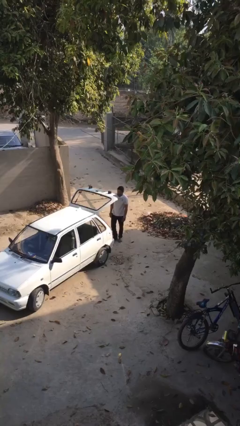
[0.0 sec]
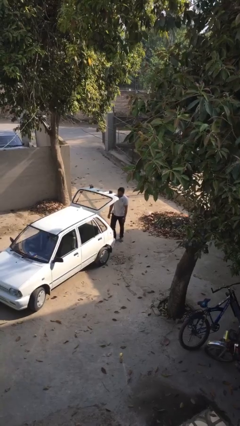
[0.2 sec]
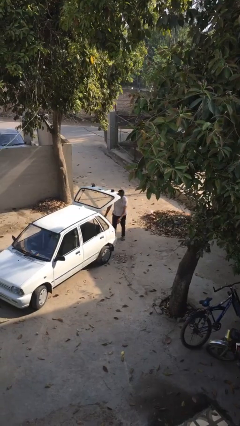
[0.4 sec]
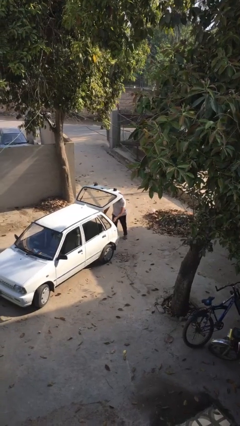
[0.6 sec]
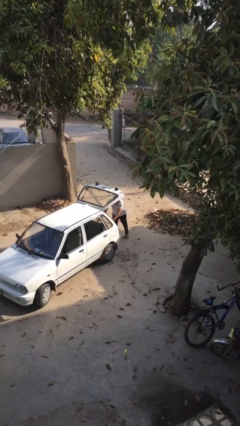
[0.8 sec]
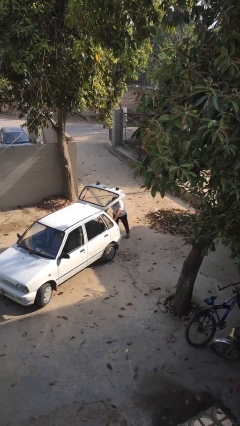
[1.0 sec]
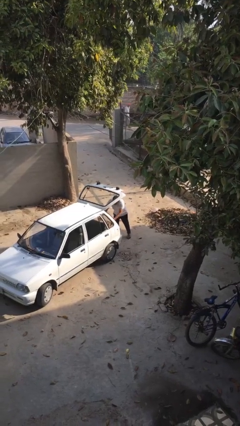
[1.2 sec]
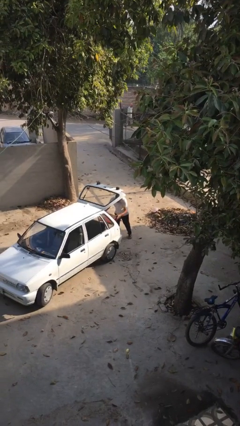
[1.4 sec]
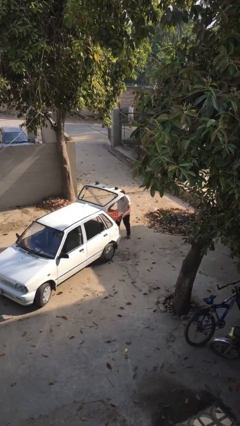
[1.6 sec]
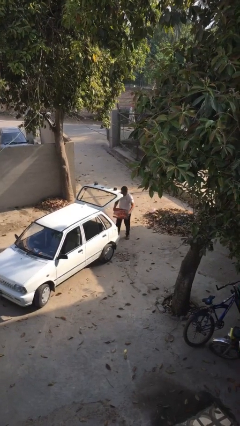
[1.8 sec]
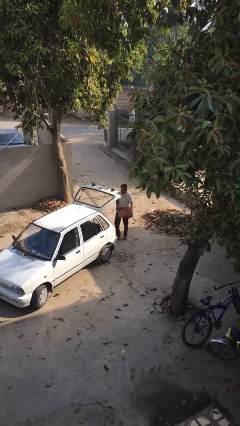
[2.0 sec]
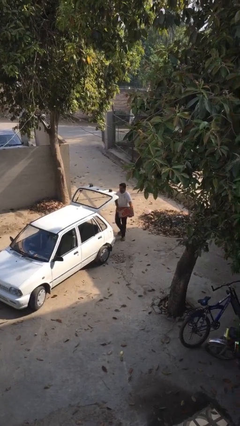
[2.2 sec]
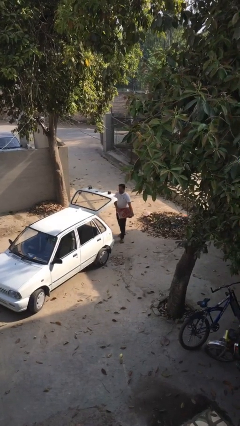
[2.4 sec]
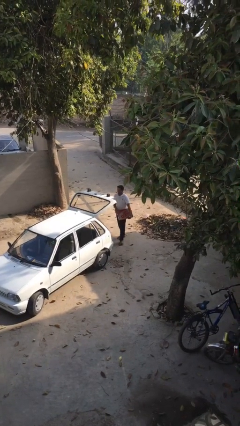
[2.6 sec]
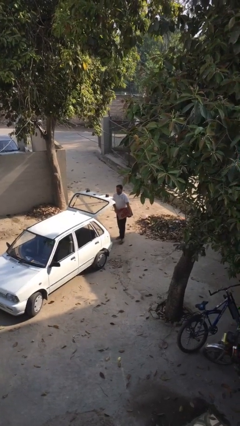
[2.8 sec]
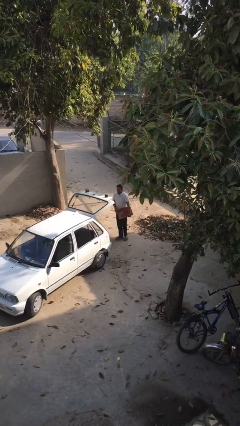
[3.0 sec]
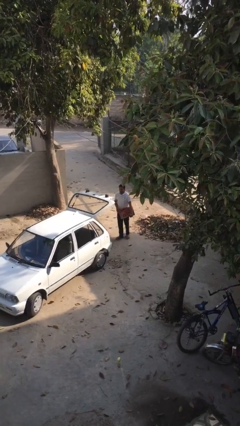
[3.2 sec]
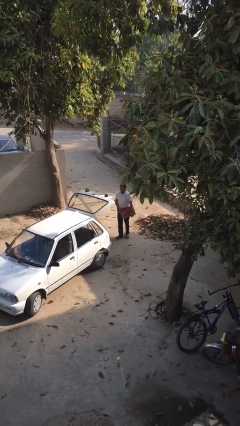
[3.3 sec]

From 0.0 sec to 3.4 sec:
person unloads car

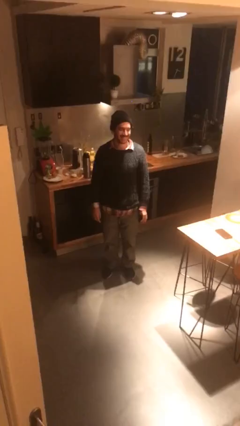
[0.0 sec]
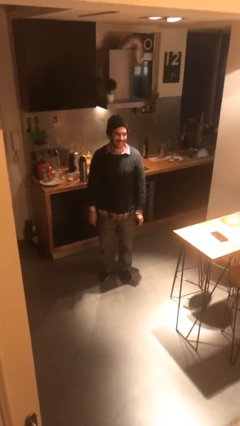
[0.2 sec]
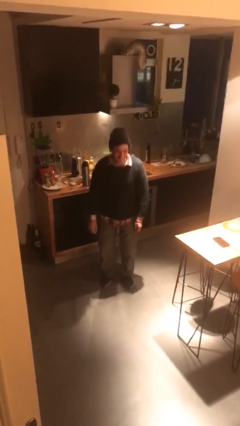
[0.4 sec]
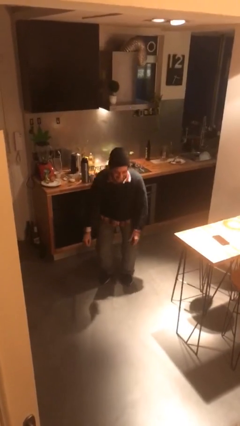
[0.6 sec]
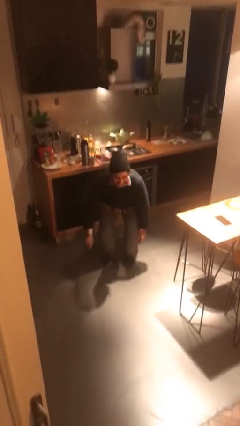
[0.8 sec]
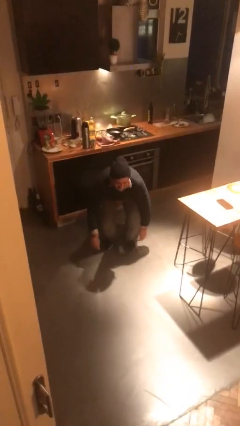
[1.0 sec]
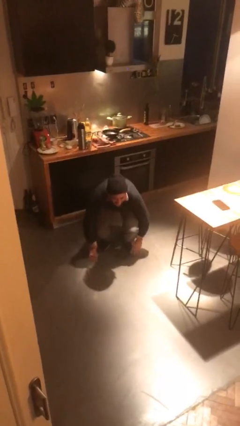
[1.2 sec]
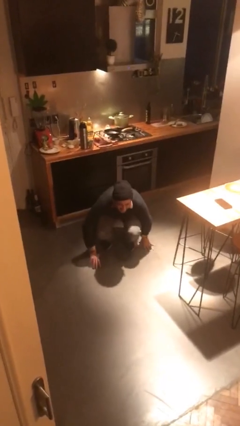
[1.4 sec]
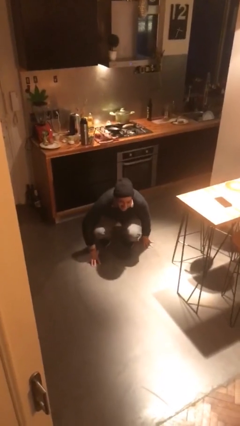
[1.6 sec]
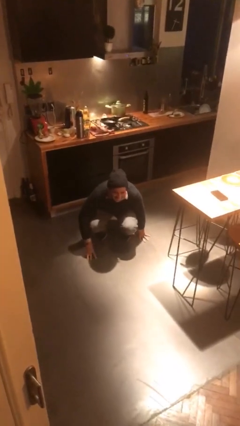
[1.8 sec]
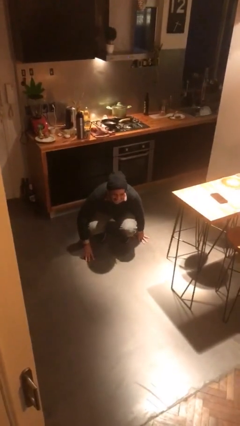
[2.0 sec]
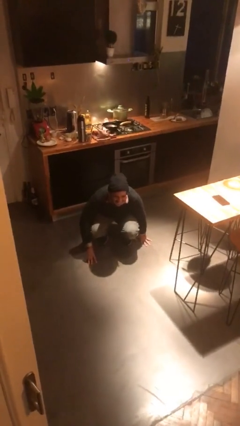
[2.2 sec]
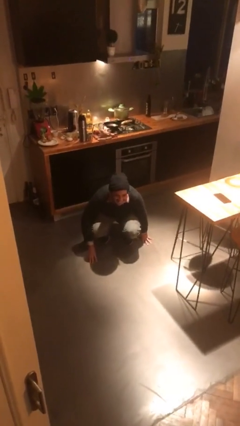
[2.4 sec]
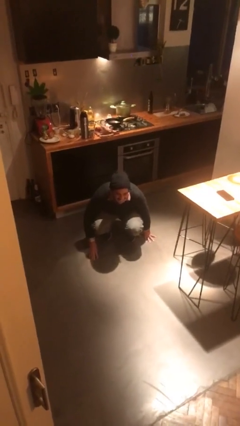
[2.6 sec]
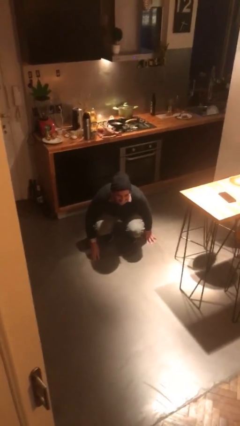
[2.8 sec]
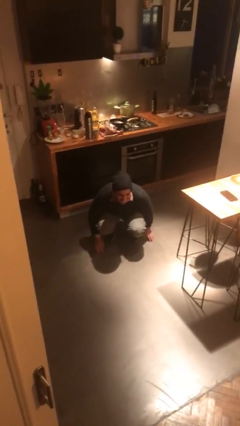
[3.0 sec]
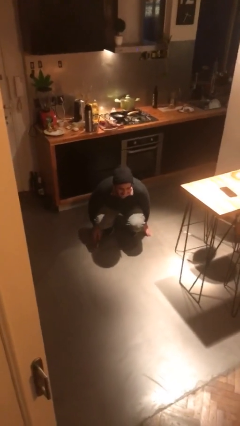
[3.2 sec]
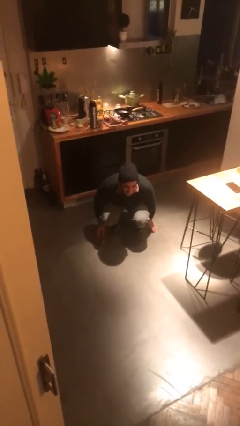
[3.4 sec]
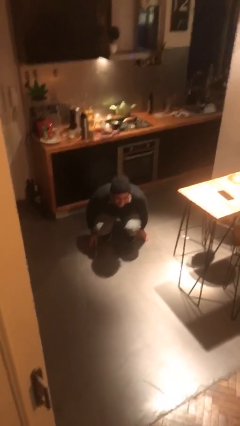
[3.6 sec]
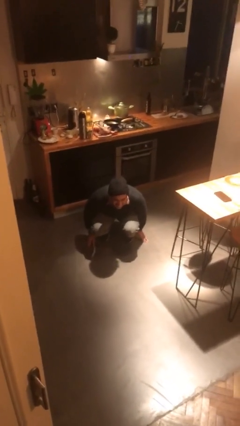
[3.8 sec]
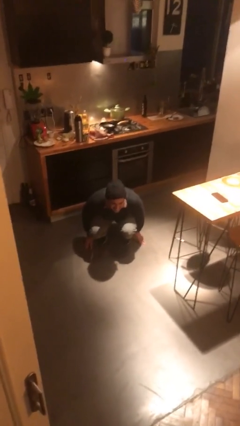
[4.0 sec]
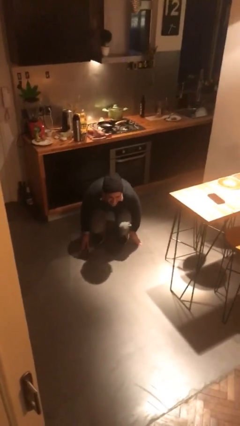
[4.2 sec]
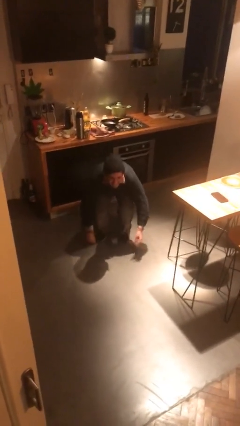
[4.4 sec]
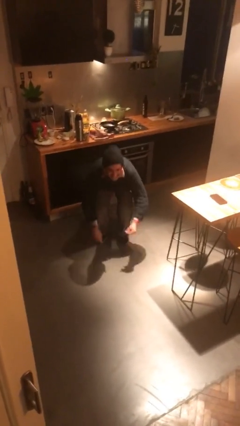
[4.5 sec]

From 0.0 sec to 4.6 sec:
person squats

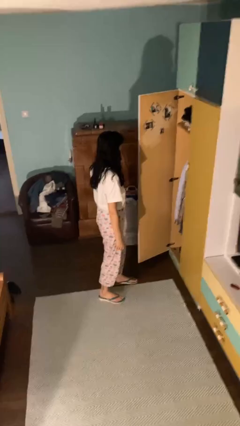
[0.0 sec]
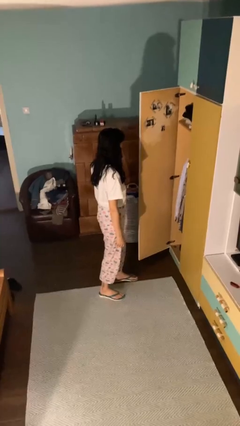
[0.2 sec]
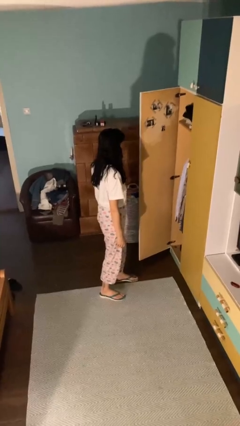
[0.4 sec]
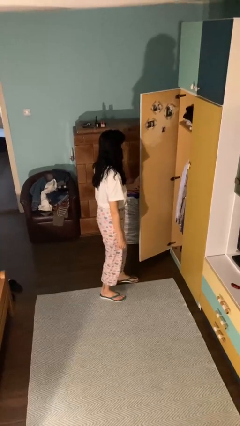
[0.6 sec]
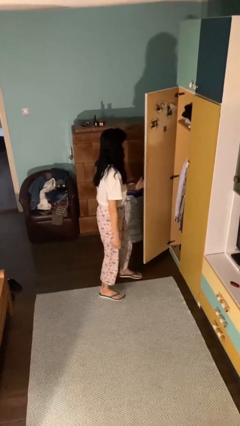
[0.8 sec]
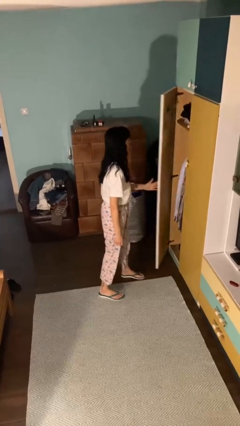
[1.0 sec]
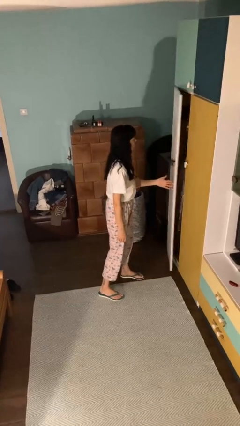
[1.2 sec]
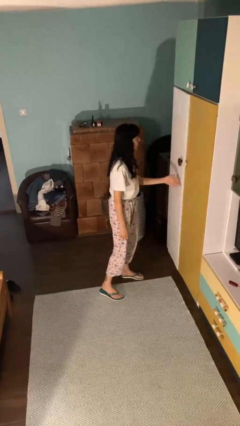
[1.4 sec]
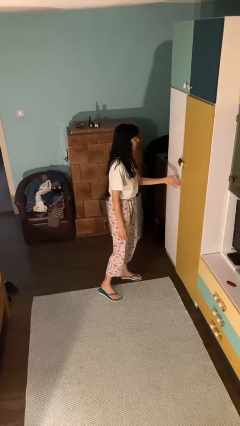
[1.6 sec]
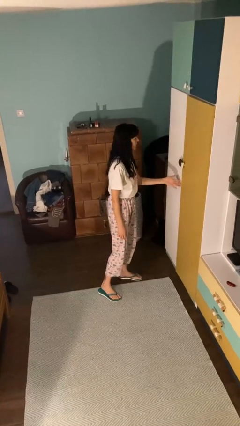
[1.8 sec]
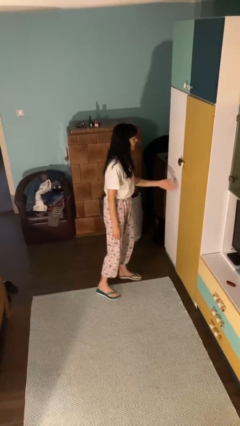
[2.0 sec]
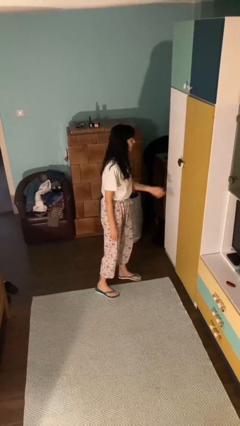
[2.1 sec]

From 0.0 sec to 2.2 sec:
person closes closet door

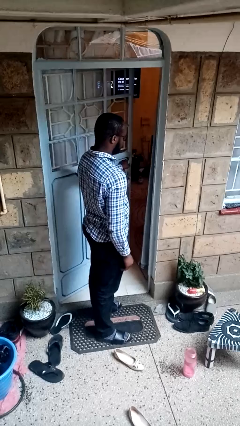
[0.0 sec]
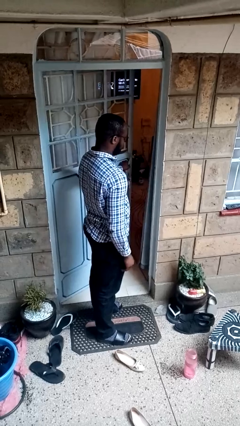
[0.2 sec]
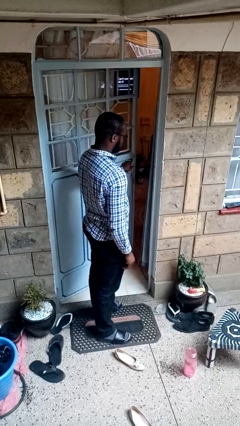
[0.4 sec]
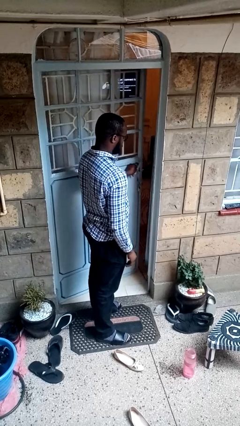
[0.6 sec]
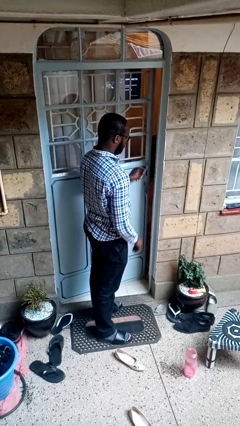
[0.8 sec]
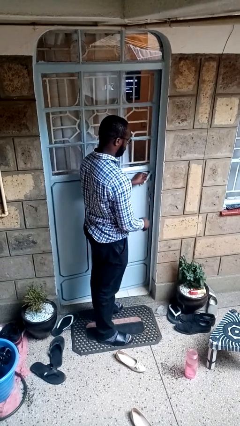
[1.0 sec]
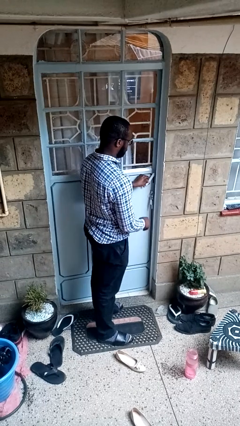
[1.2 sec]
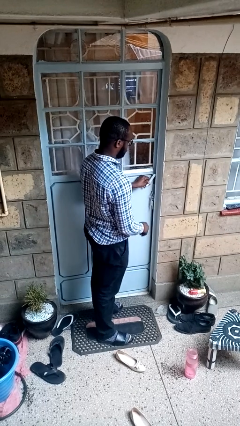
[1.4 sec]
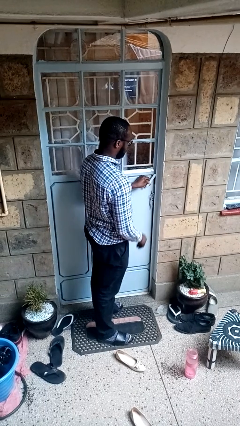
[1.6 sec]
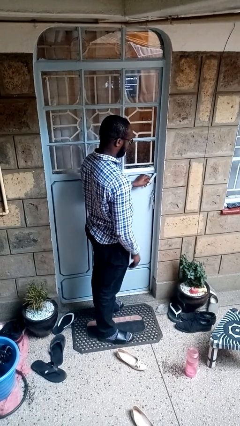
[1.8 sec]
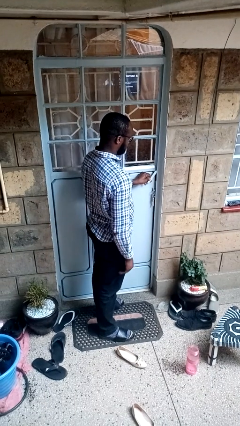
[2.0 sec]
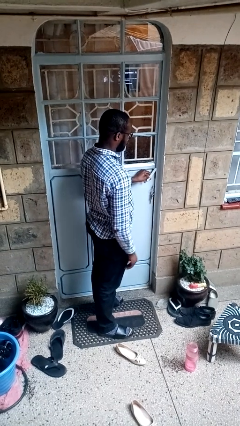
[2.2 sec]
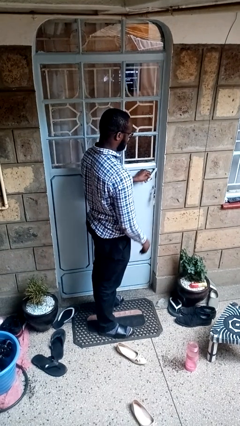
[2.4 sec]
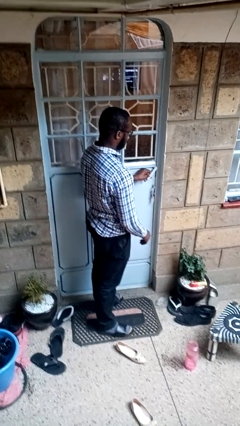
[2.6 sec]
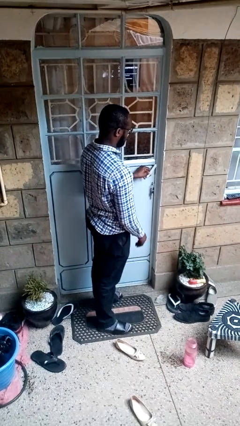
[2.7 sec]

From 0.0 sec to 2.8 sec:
person closes facility door

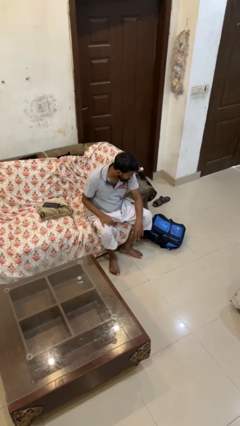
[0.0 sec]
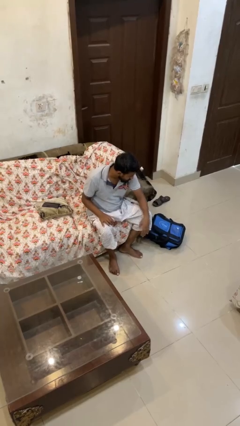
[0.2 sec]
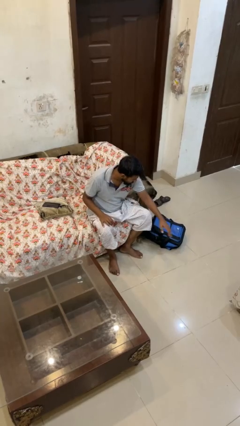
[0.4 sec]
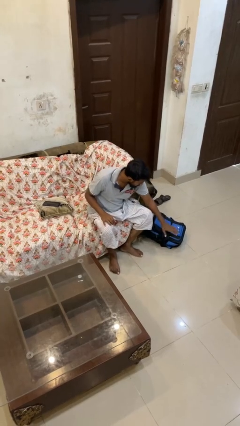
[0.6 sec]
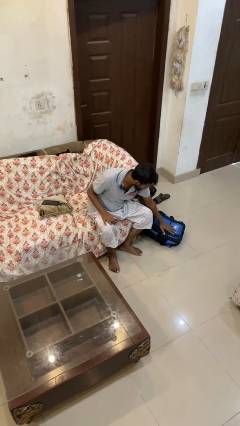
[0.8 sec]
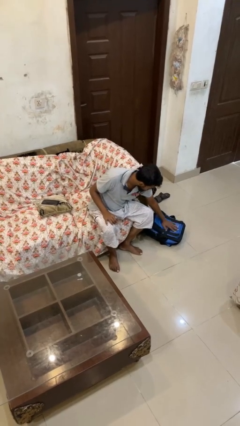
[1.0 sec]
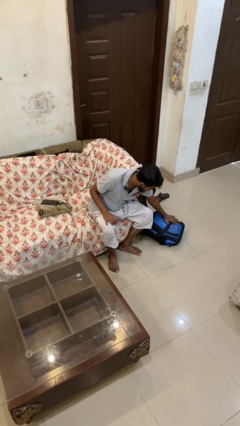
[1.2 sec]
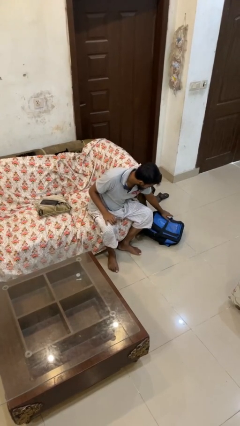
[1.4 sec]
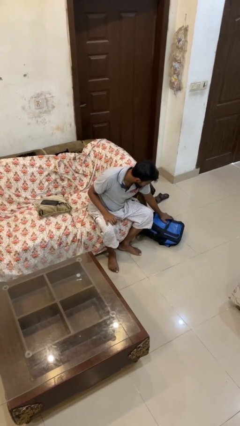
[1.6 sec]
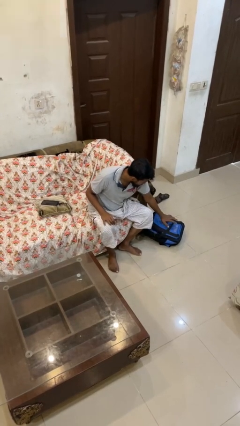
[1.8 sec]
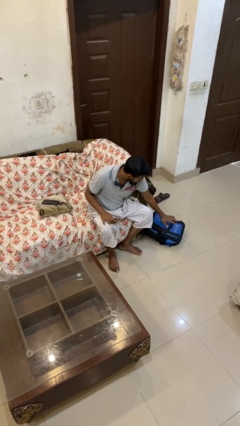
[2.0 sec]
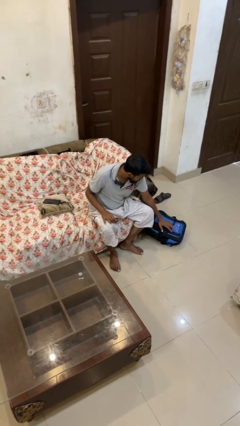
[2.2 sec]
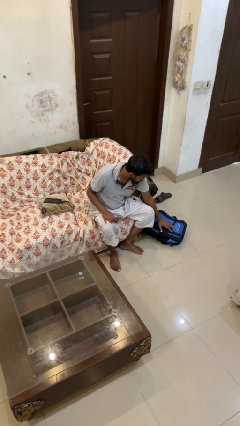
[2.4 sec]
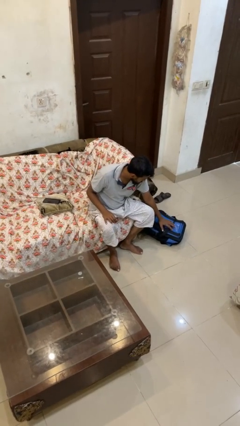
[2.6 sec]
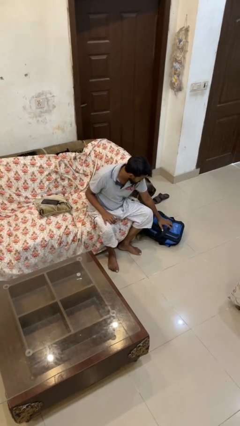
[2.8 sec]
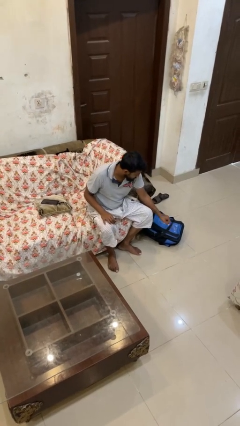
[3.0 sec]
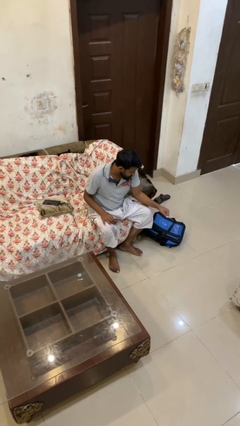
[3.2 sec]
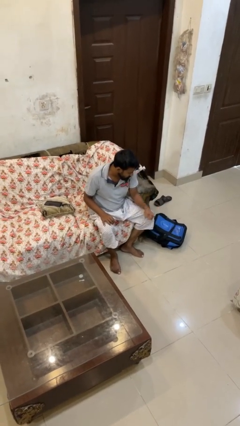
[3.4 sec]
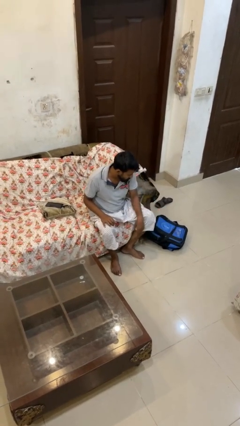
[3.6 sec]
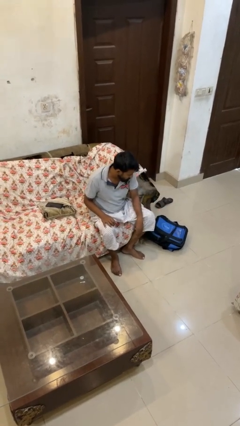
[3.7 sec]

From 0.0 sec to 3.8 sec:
person waves hand over object

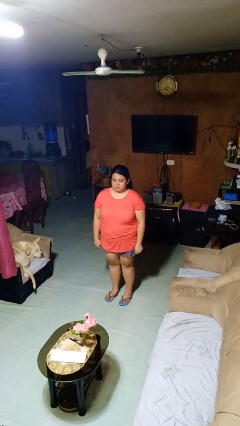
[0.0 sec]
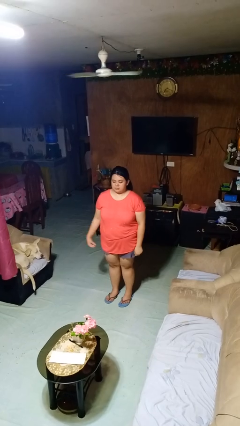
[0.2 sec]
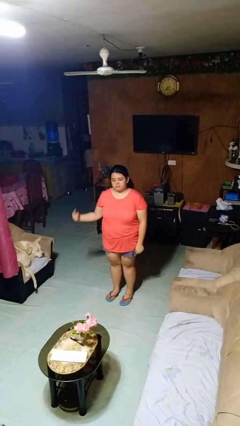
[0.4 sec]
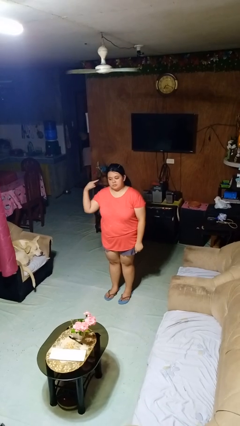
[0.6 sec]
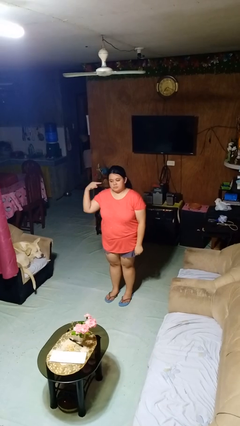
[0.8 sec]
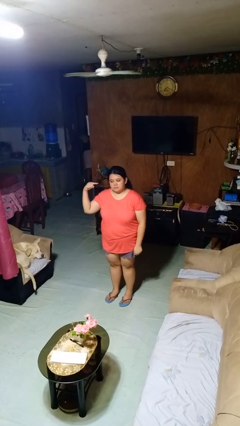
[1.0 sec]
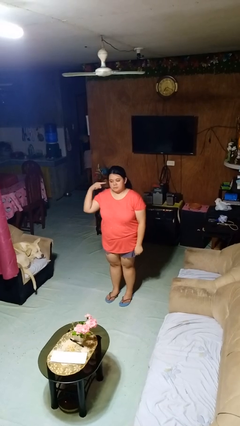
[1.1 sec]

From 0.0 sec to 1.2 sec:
person gestures listen closely
